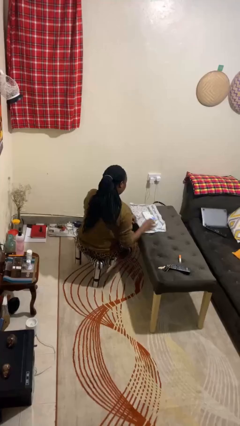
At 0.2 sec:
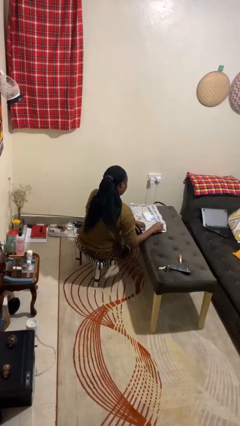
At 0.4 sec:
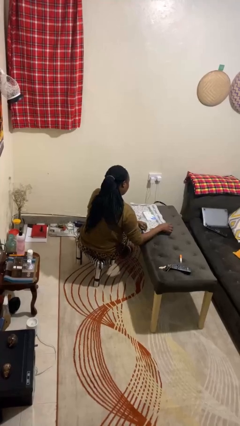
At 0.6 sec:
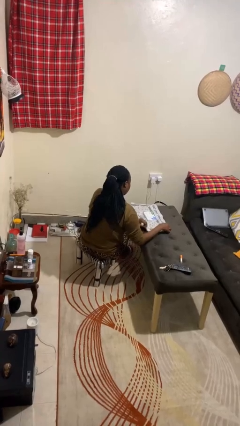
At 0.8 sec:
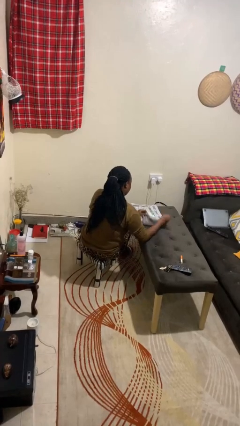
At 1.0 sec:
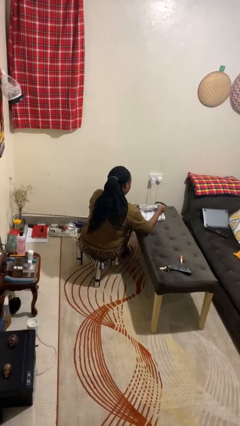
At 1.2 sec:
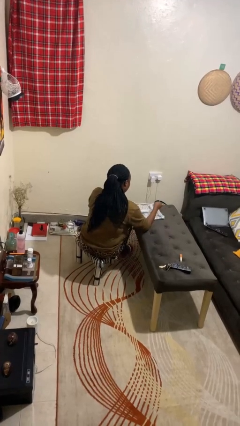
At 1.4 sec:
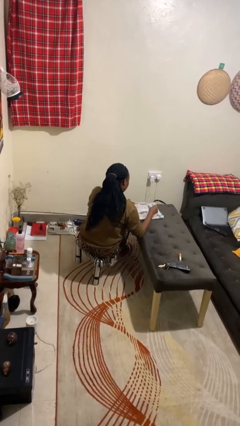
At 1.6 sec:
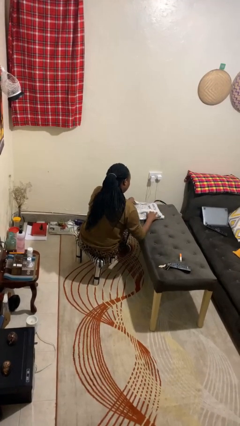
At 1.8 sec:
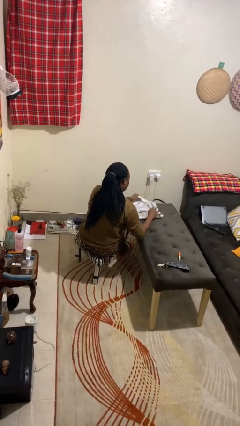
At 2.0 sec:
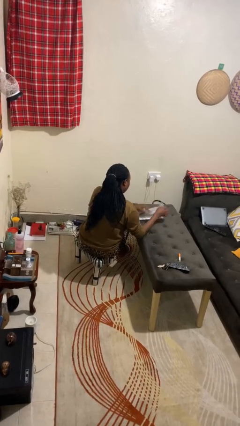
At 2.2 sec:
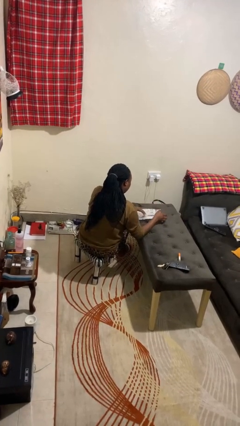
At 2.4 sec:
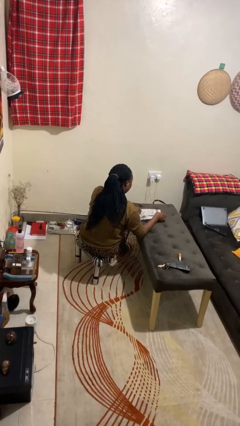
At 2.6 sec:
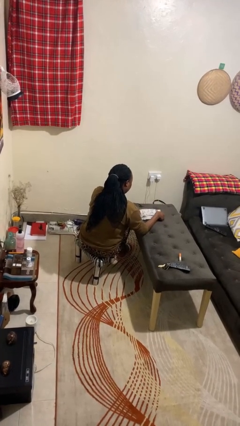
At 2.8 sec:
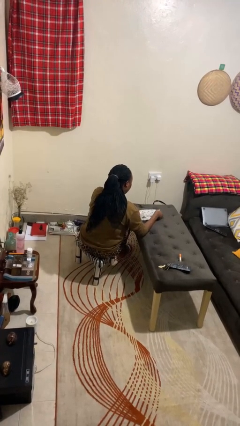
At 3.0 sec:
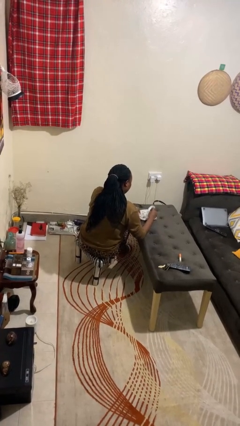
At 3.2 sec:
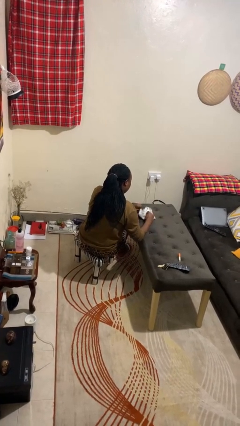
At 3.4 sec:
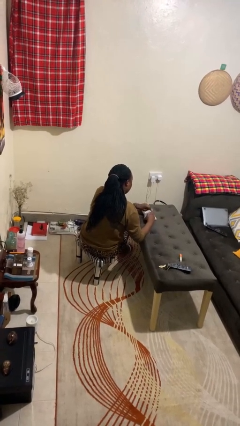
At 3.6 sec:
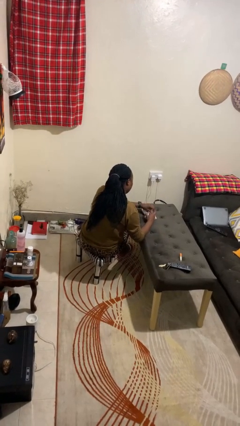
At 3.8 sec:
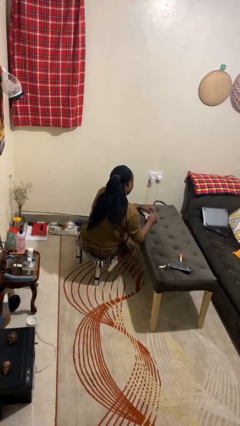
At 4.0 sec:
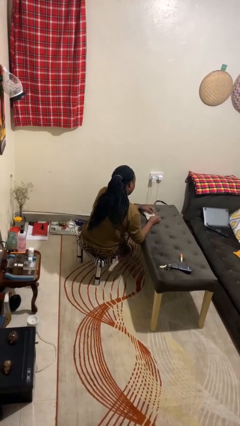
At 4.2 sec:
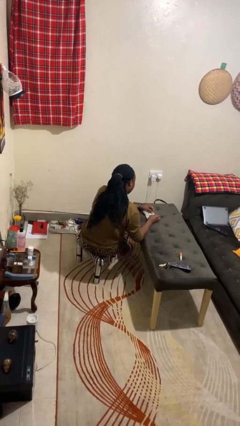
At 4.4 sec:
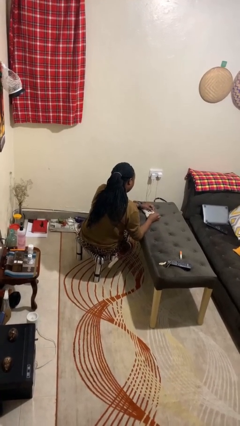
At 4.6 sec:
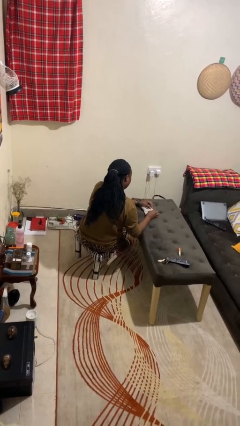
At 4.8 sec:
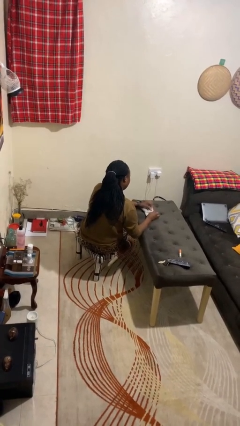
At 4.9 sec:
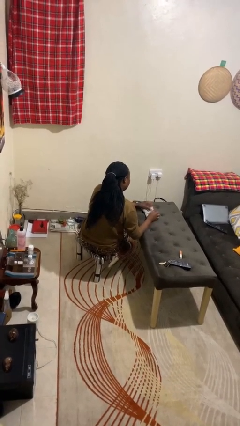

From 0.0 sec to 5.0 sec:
person wraps box

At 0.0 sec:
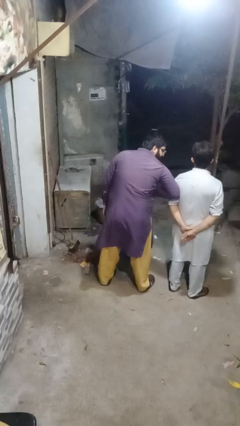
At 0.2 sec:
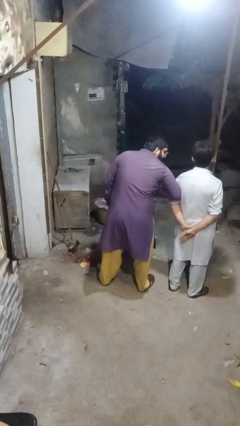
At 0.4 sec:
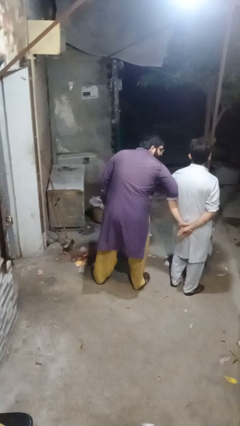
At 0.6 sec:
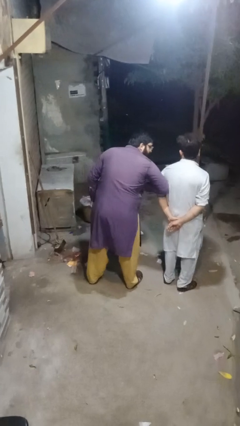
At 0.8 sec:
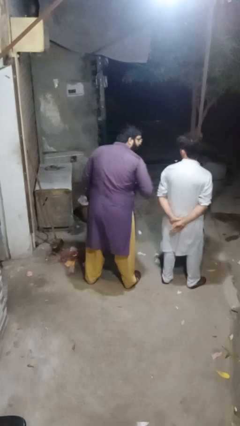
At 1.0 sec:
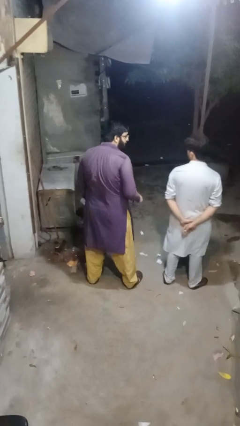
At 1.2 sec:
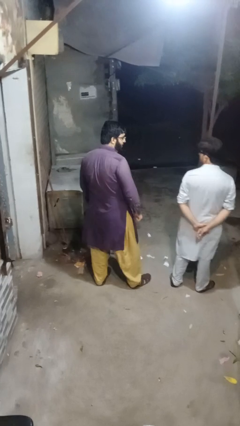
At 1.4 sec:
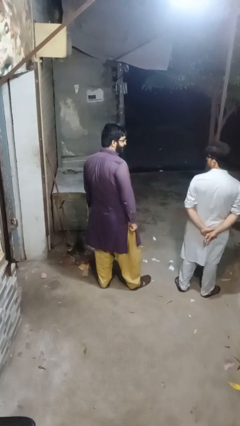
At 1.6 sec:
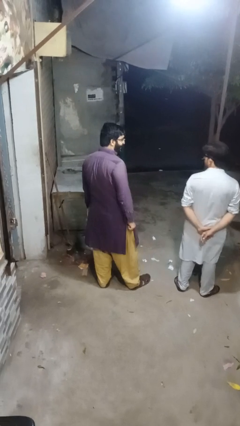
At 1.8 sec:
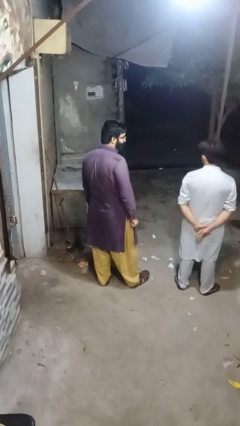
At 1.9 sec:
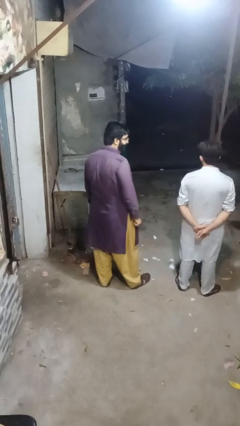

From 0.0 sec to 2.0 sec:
person nudges person with elbow

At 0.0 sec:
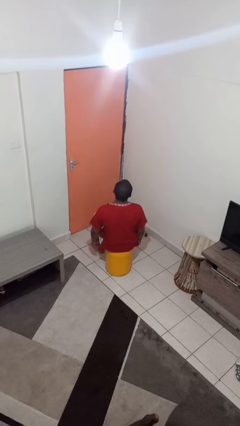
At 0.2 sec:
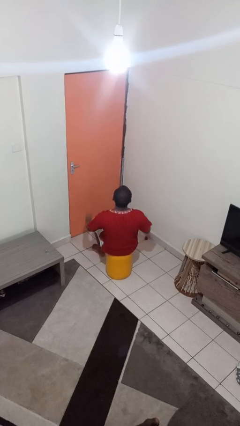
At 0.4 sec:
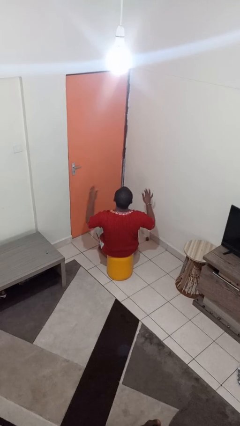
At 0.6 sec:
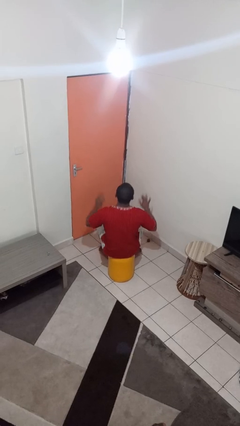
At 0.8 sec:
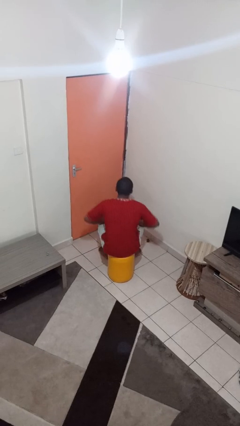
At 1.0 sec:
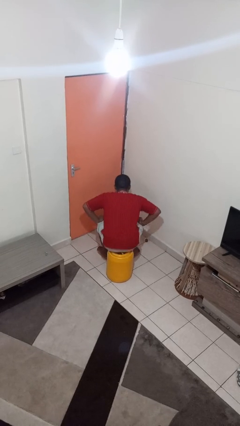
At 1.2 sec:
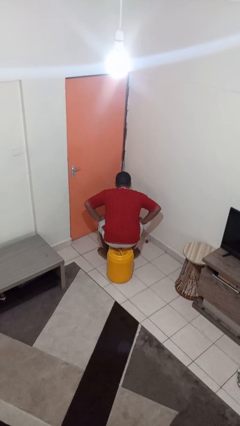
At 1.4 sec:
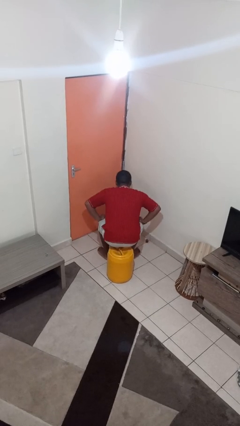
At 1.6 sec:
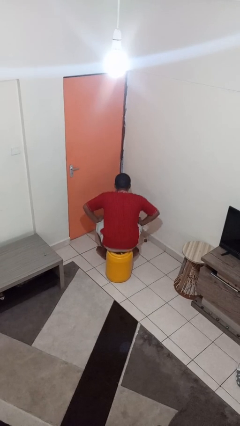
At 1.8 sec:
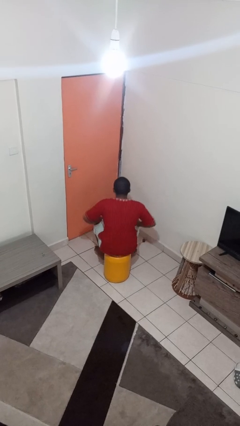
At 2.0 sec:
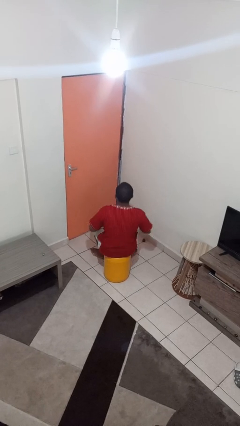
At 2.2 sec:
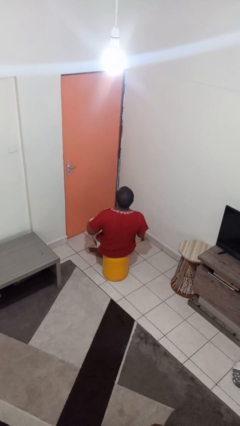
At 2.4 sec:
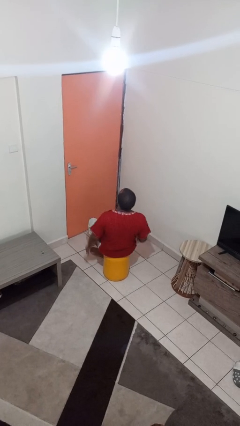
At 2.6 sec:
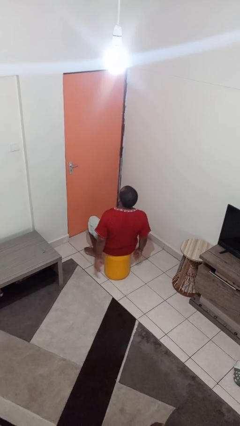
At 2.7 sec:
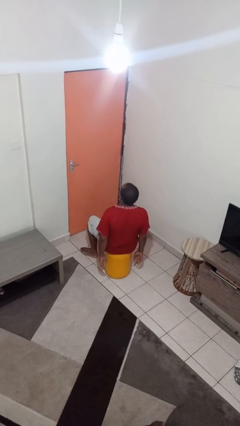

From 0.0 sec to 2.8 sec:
person slaps hands on thighs

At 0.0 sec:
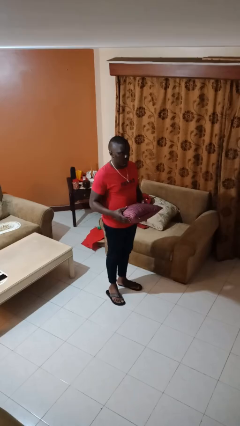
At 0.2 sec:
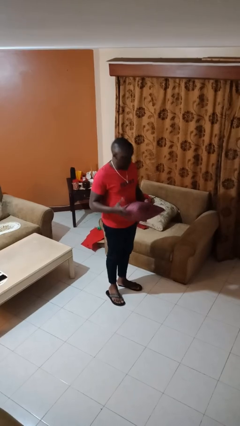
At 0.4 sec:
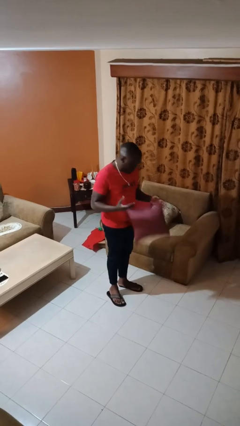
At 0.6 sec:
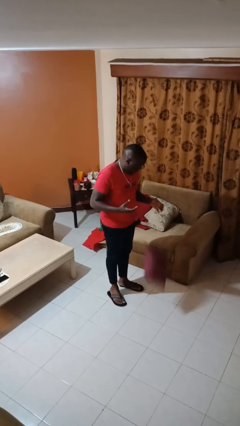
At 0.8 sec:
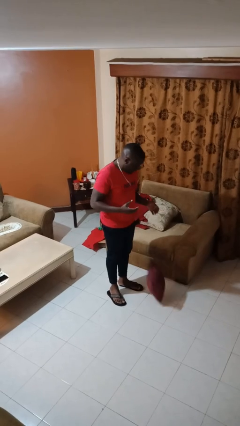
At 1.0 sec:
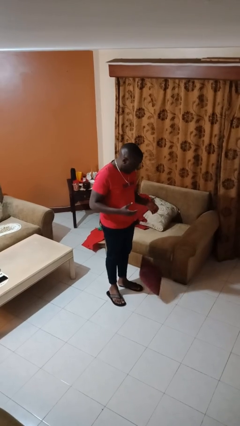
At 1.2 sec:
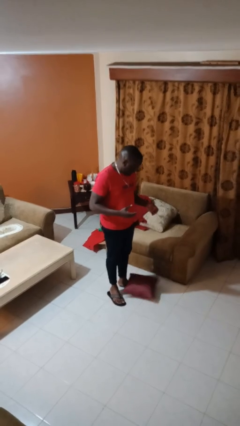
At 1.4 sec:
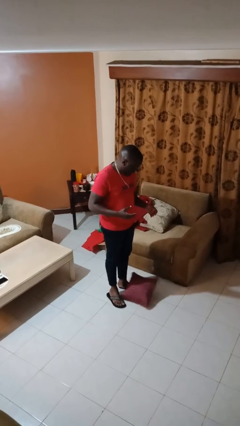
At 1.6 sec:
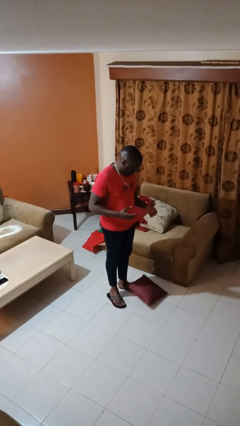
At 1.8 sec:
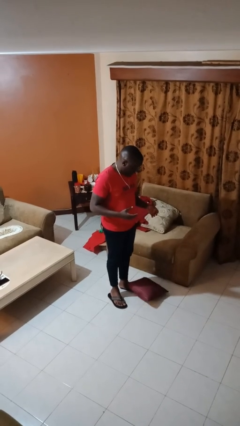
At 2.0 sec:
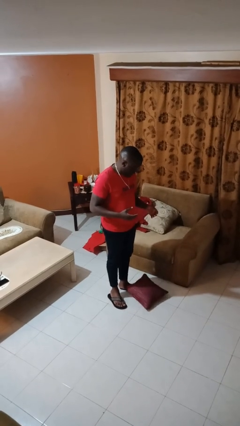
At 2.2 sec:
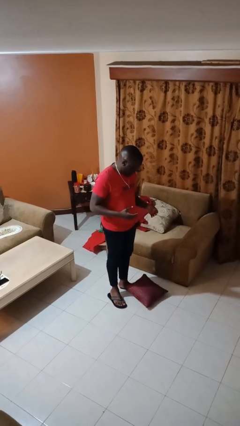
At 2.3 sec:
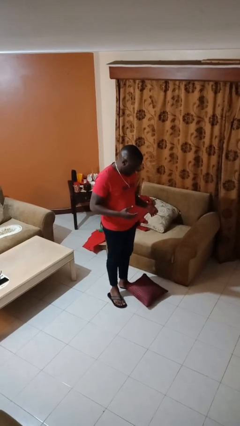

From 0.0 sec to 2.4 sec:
person drops object

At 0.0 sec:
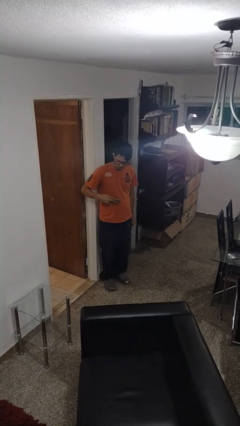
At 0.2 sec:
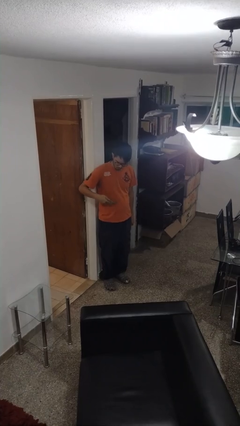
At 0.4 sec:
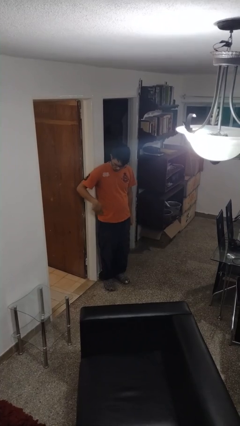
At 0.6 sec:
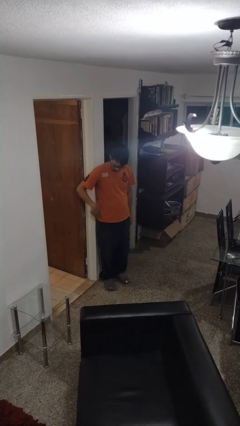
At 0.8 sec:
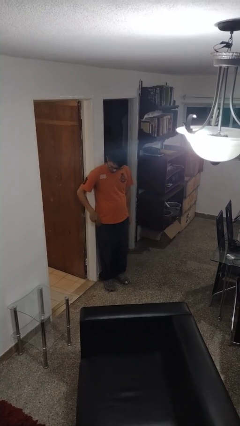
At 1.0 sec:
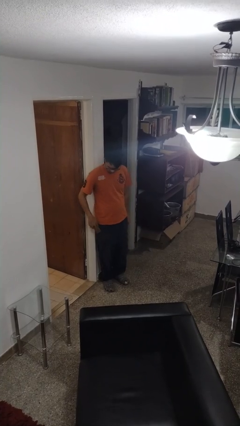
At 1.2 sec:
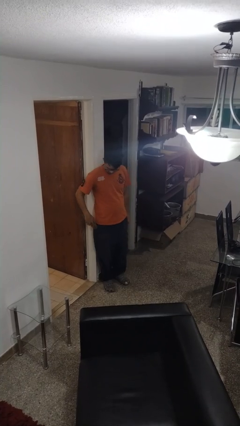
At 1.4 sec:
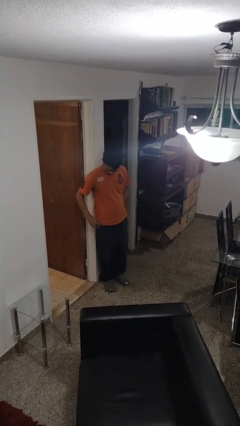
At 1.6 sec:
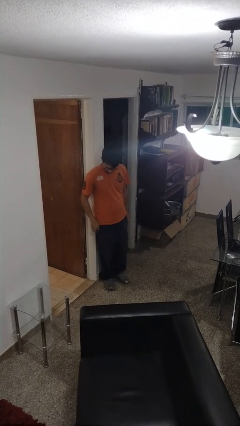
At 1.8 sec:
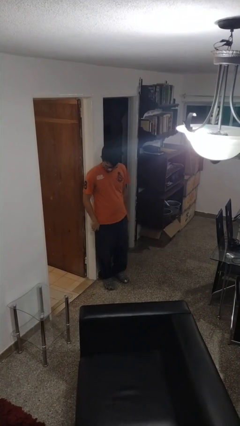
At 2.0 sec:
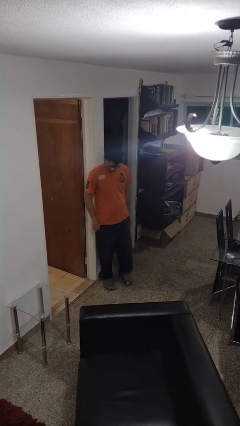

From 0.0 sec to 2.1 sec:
person puts phone into pocket

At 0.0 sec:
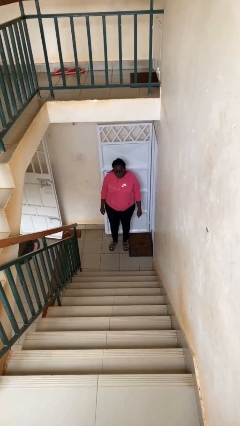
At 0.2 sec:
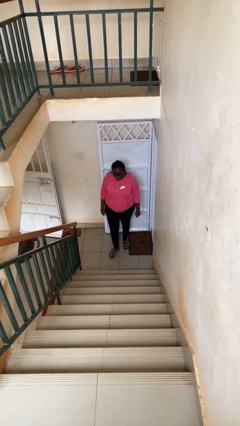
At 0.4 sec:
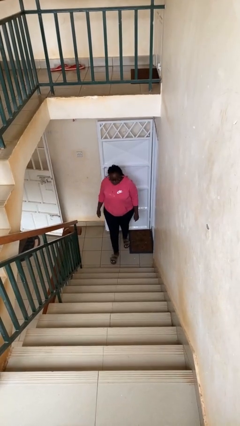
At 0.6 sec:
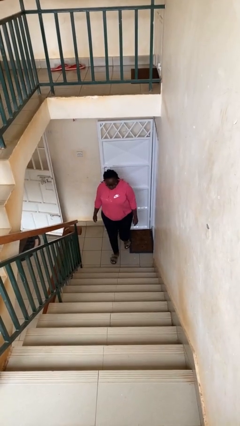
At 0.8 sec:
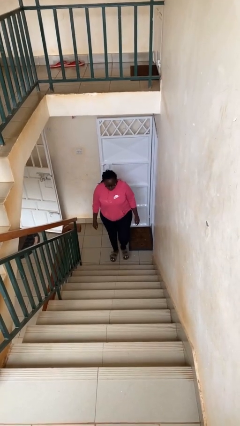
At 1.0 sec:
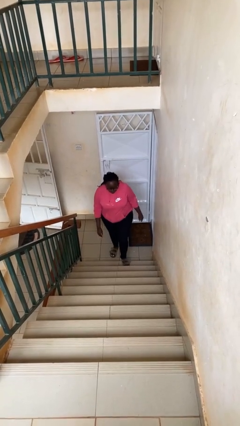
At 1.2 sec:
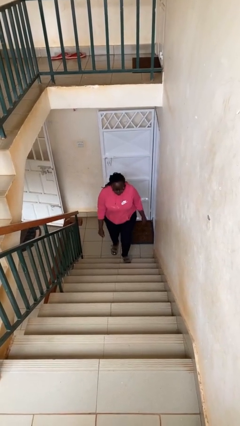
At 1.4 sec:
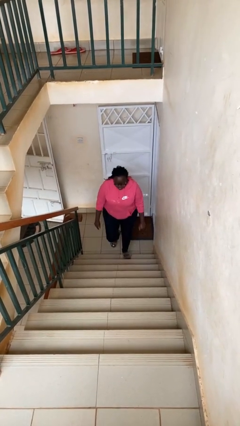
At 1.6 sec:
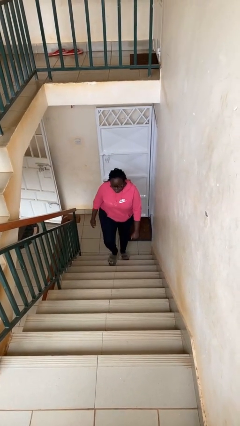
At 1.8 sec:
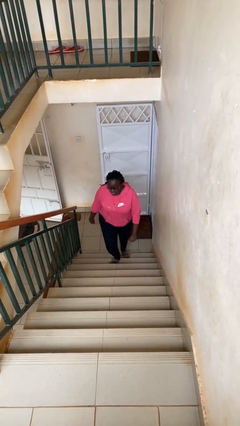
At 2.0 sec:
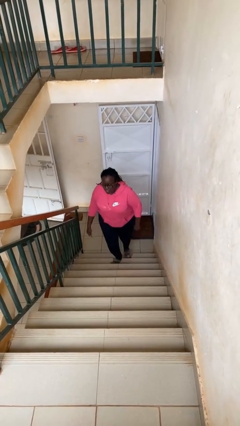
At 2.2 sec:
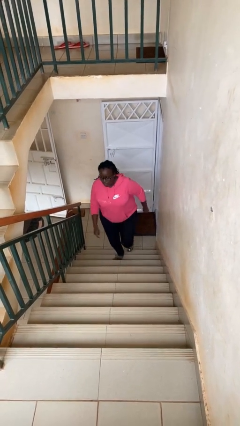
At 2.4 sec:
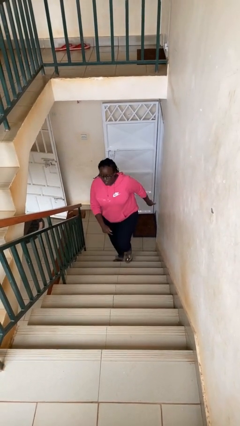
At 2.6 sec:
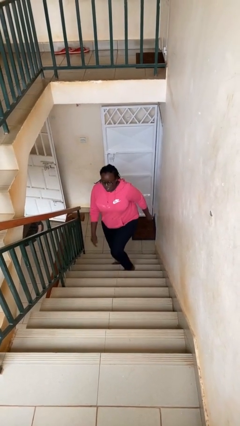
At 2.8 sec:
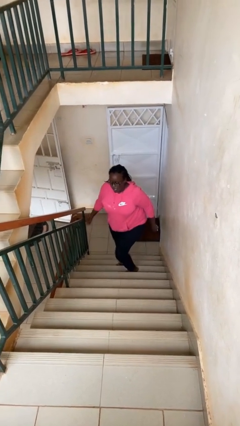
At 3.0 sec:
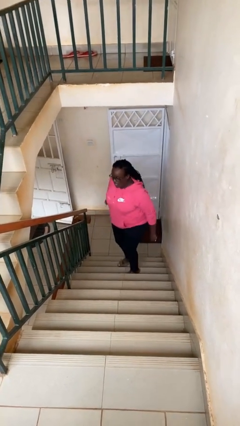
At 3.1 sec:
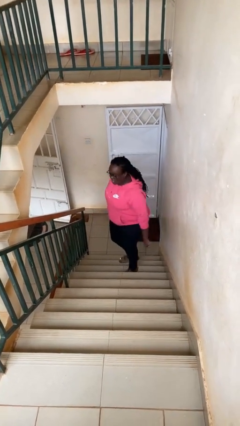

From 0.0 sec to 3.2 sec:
person climbs up stairs
